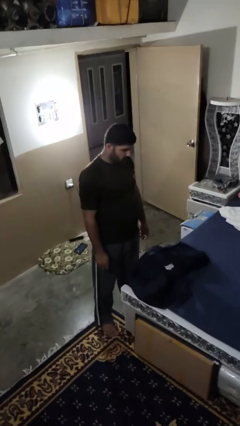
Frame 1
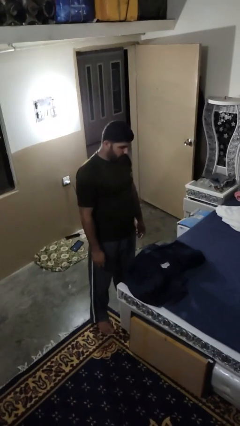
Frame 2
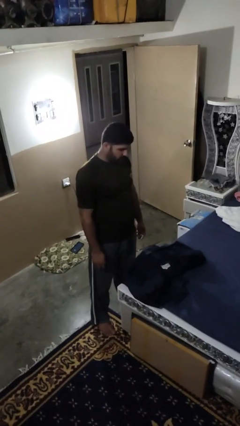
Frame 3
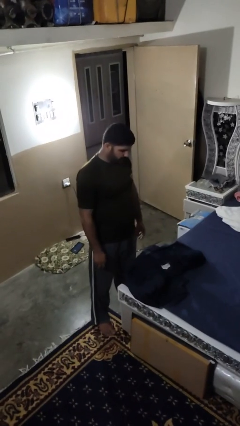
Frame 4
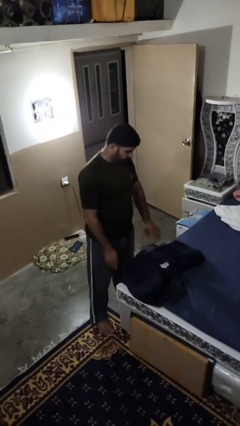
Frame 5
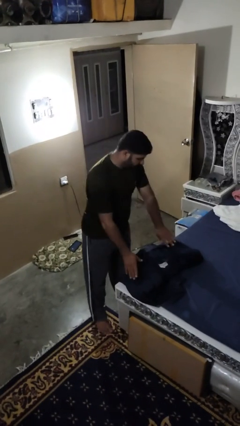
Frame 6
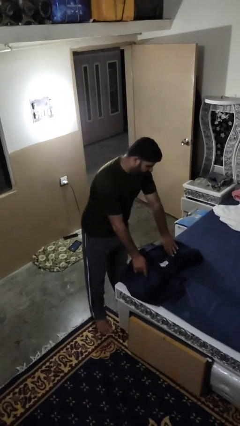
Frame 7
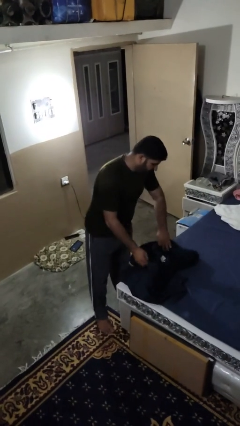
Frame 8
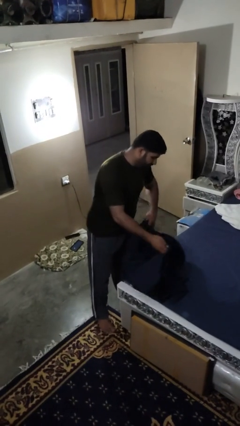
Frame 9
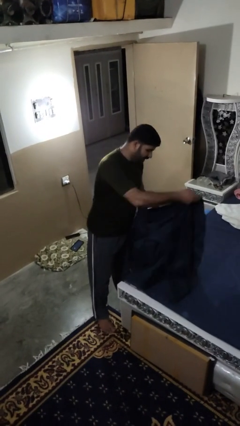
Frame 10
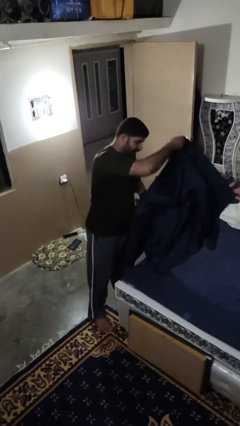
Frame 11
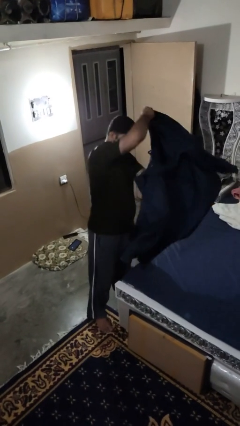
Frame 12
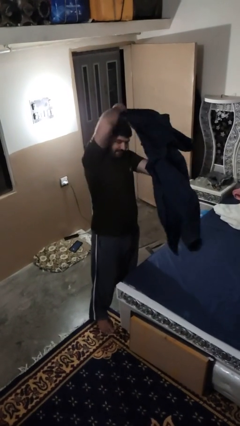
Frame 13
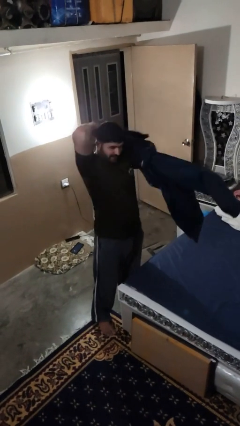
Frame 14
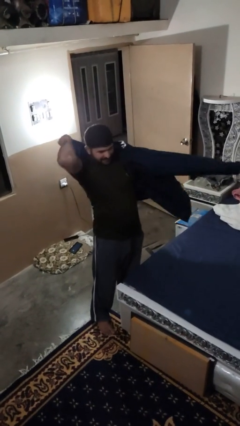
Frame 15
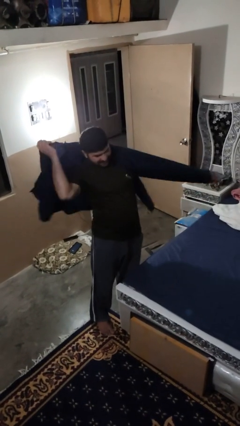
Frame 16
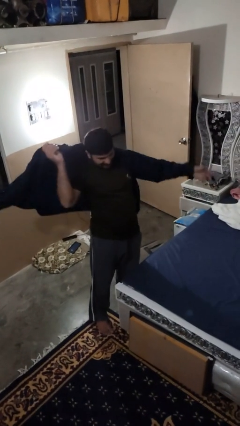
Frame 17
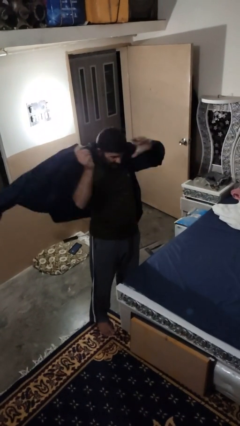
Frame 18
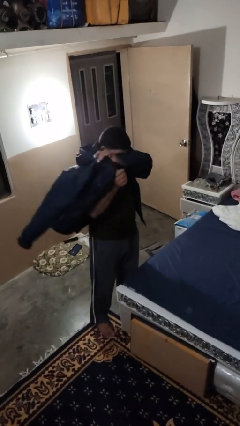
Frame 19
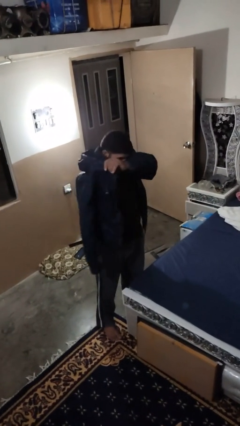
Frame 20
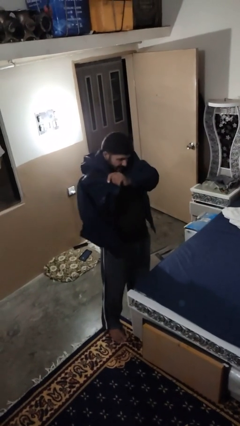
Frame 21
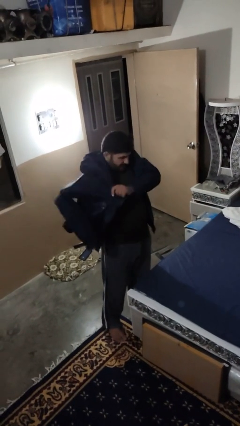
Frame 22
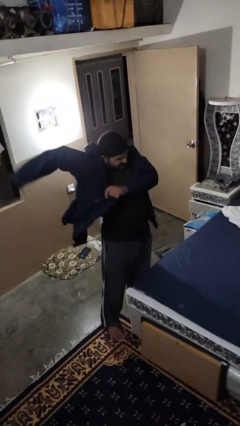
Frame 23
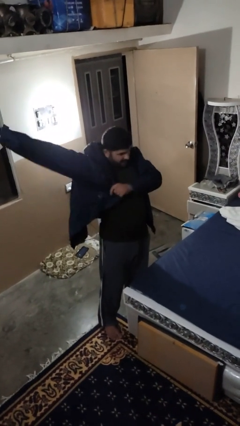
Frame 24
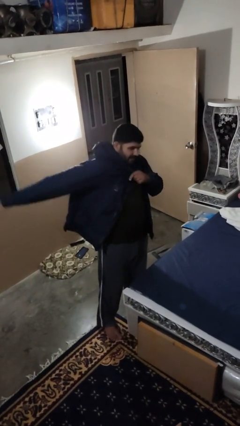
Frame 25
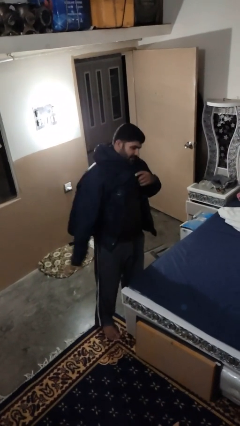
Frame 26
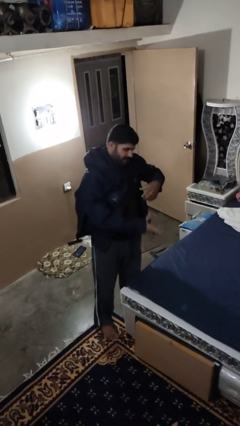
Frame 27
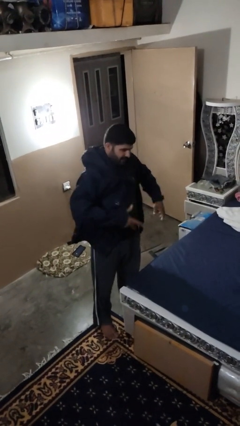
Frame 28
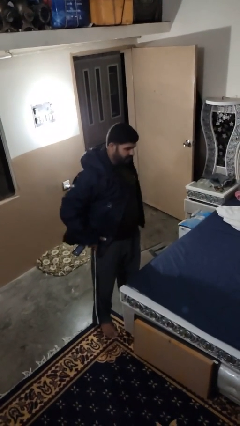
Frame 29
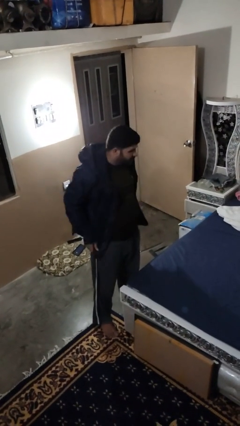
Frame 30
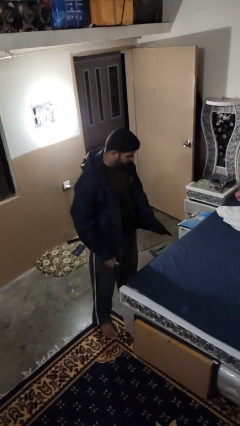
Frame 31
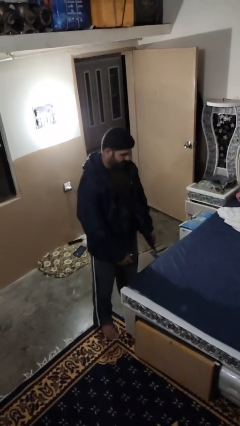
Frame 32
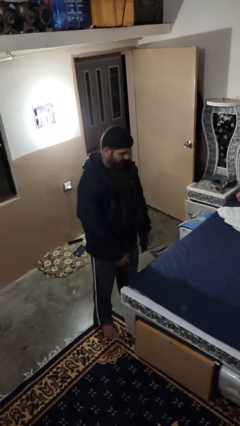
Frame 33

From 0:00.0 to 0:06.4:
person puts on jacket

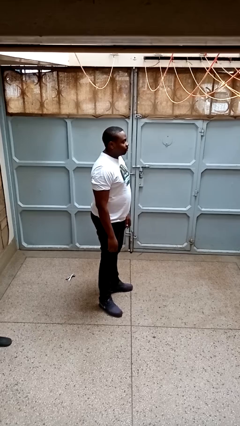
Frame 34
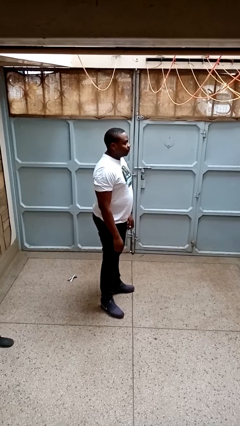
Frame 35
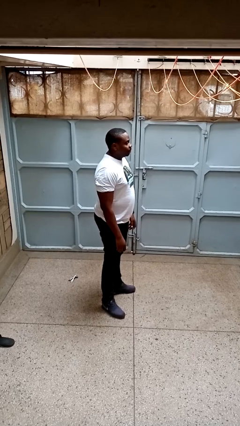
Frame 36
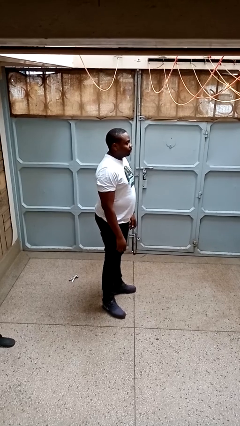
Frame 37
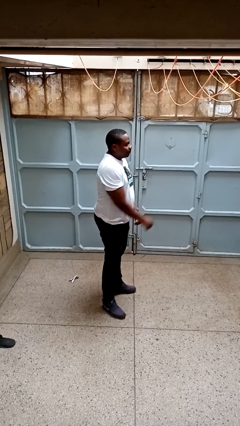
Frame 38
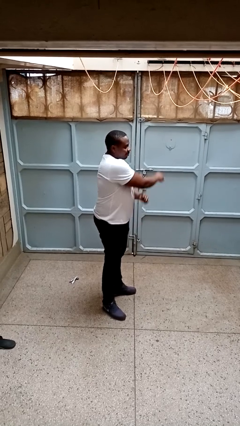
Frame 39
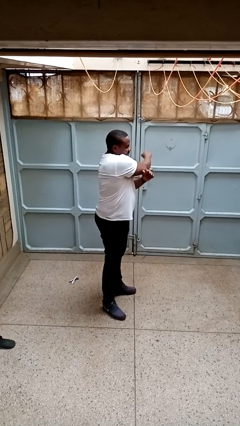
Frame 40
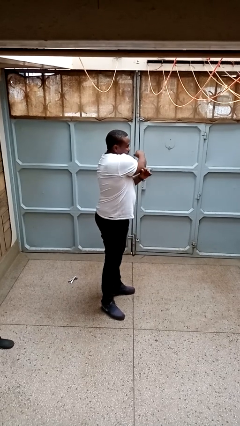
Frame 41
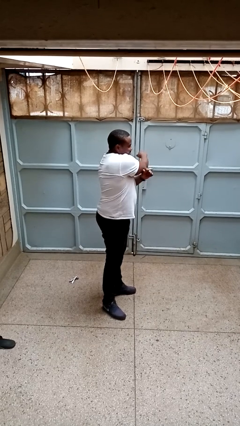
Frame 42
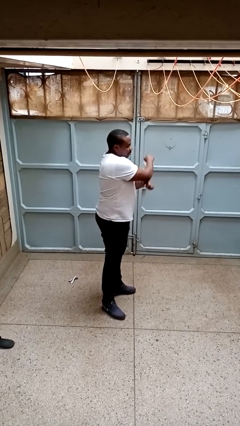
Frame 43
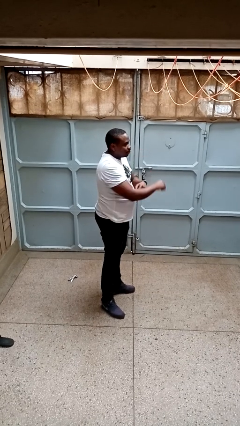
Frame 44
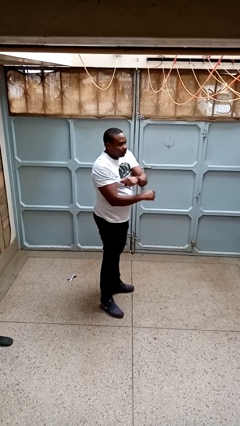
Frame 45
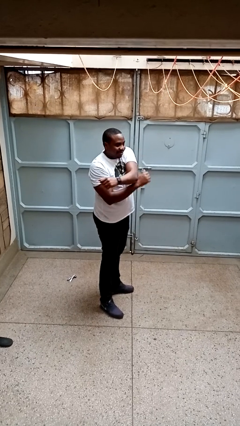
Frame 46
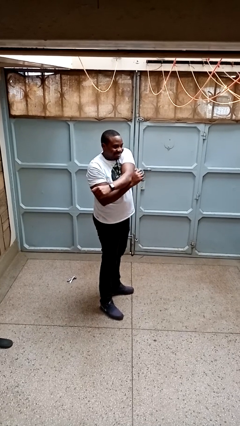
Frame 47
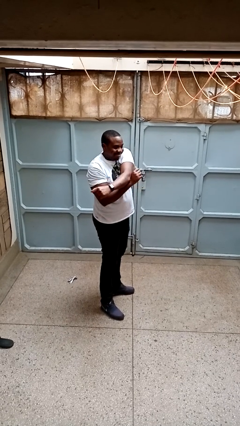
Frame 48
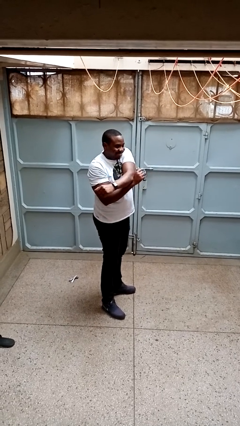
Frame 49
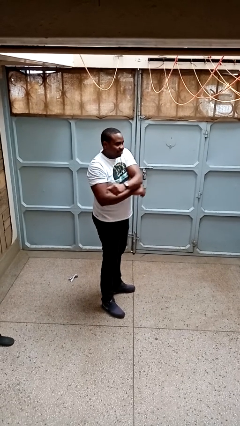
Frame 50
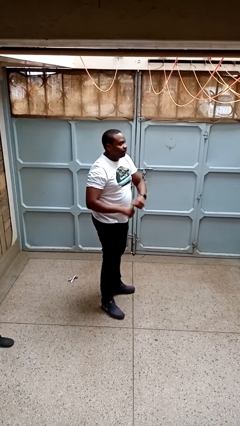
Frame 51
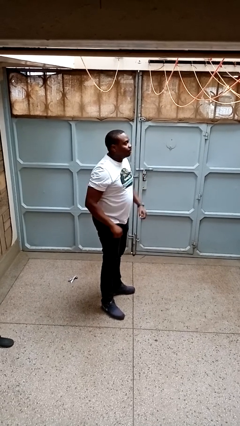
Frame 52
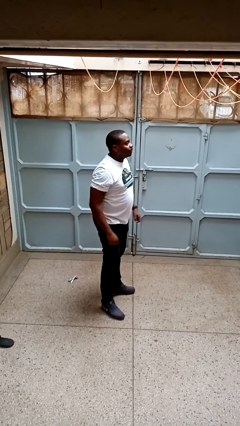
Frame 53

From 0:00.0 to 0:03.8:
person stretches arms to side

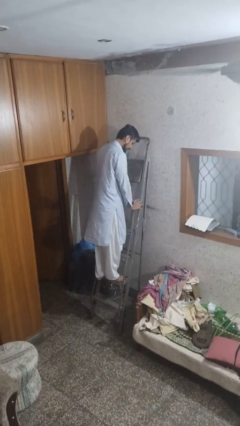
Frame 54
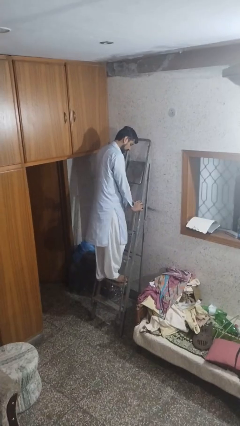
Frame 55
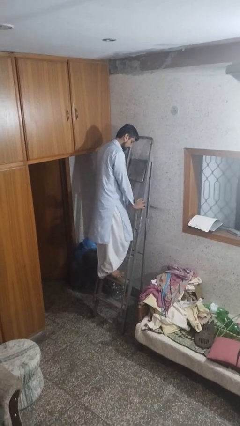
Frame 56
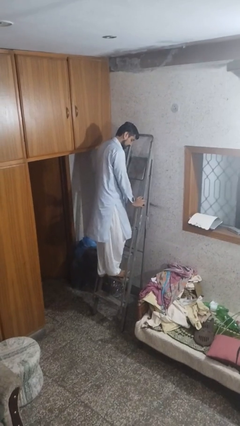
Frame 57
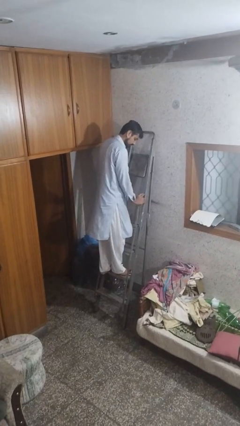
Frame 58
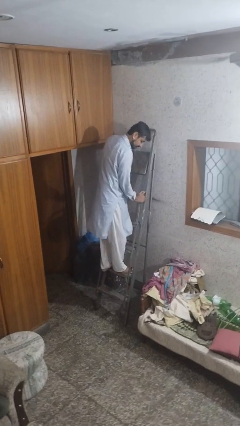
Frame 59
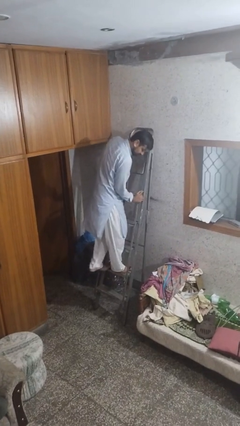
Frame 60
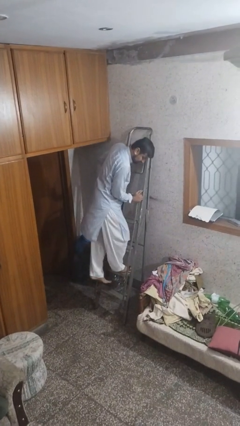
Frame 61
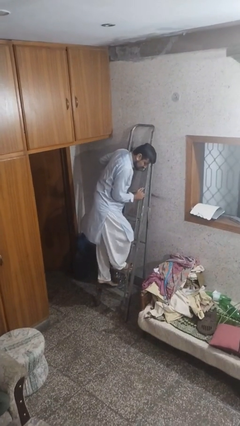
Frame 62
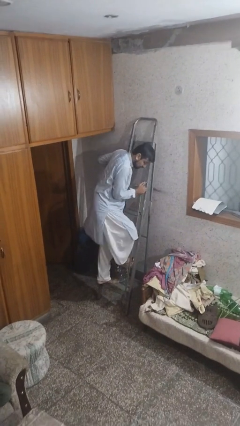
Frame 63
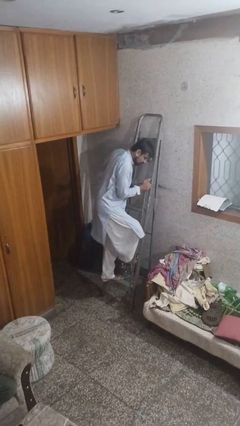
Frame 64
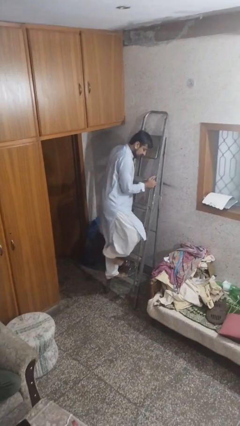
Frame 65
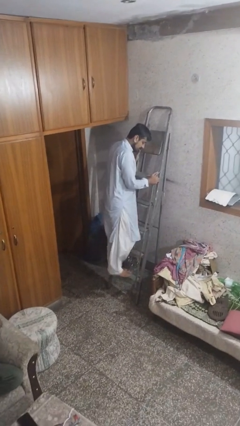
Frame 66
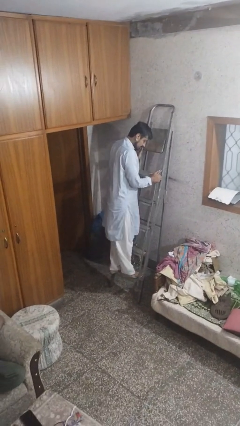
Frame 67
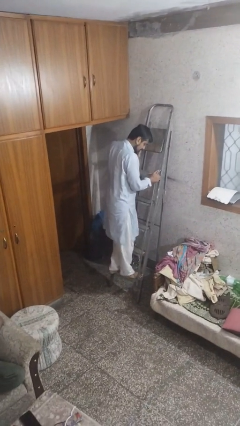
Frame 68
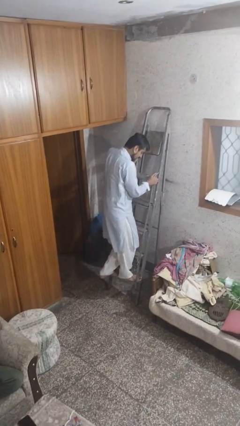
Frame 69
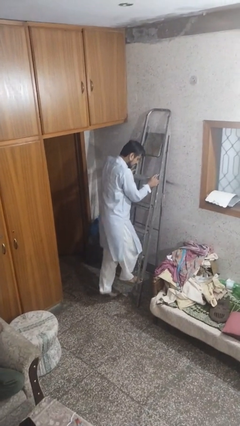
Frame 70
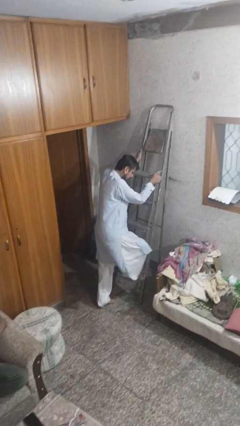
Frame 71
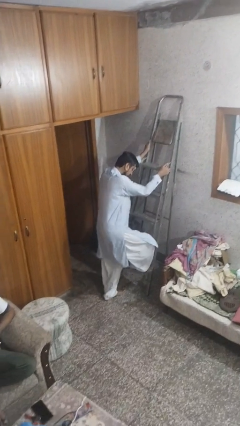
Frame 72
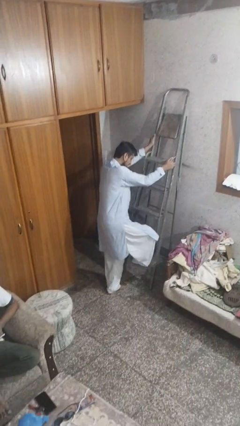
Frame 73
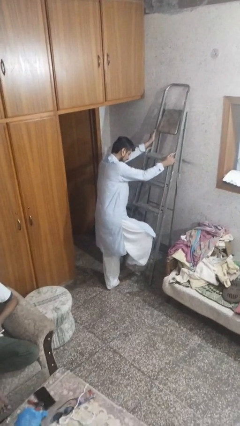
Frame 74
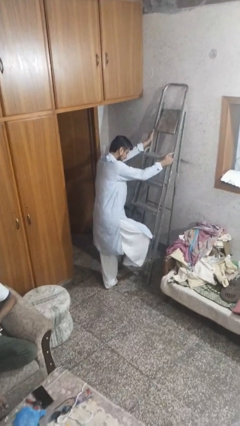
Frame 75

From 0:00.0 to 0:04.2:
person climbs down ladder

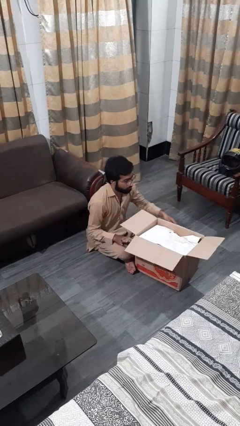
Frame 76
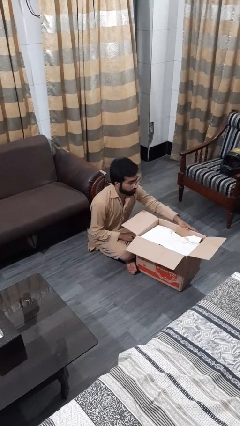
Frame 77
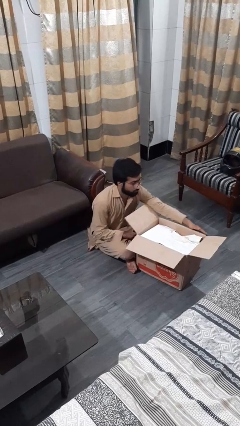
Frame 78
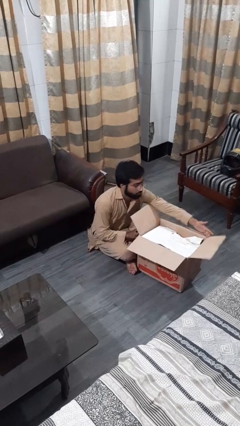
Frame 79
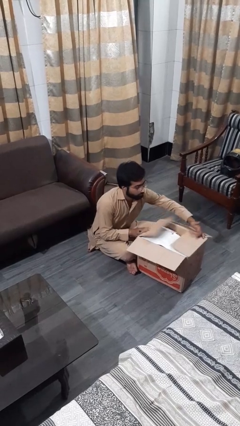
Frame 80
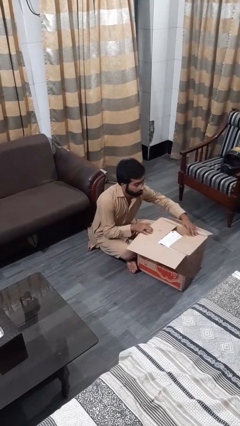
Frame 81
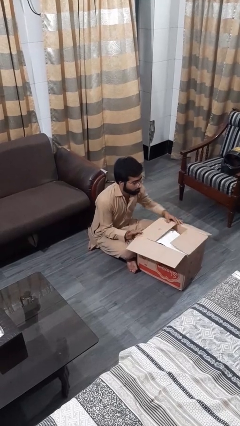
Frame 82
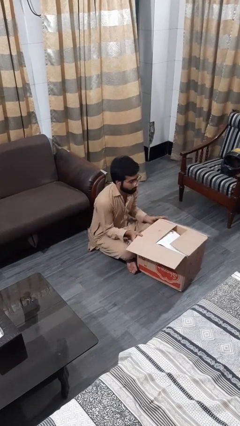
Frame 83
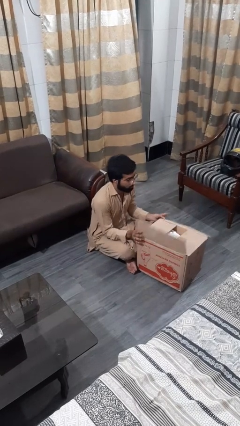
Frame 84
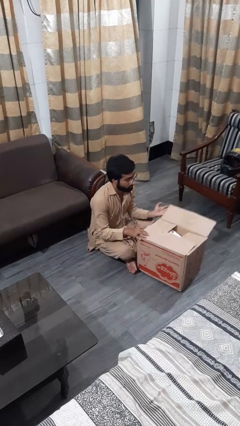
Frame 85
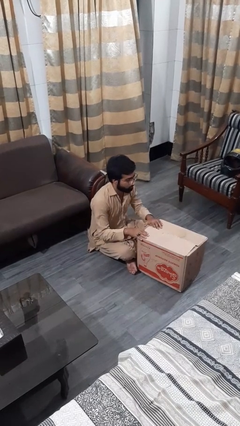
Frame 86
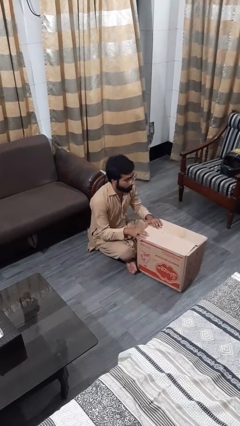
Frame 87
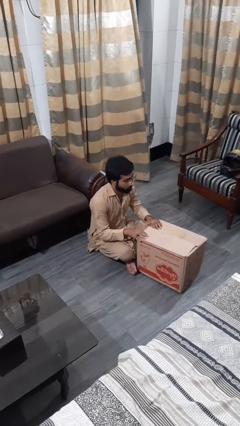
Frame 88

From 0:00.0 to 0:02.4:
person closes box

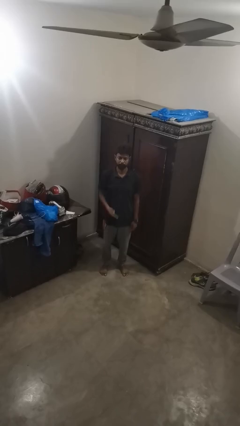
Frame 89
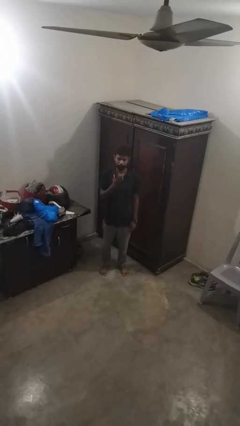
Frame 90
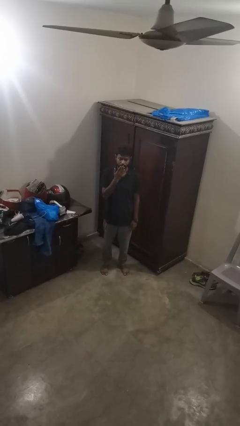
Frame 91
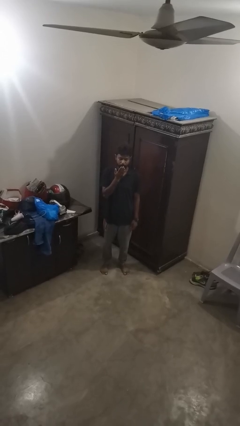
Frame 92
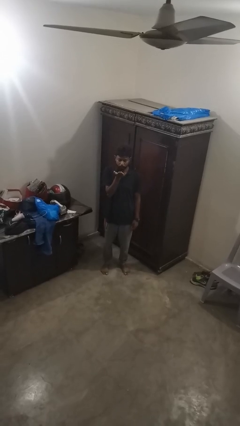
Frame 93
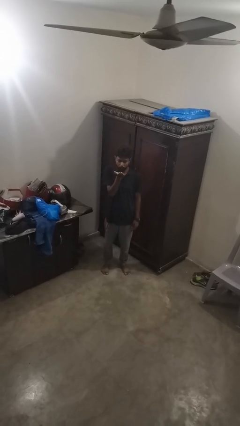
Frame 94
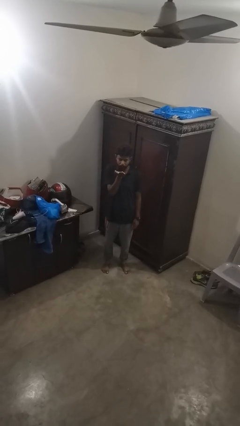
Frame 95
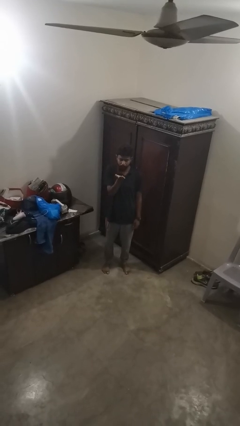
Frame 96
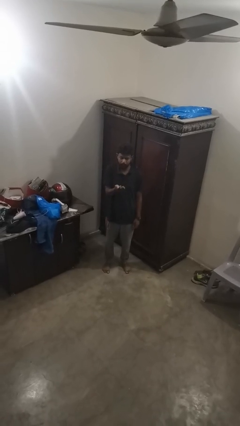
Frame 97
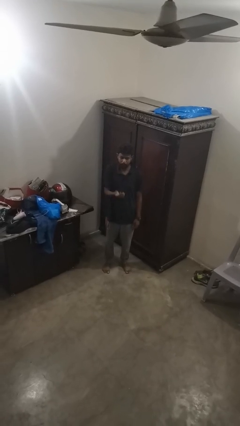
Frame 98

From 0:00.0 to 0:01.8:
person gestures blow kiss
